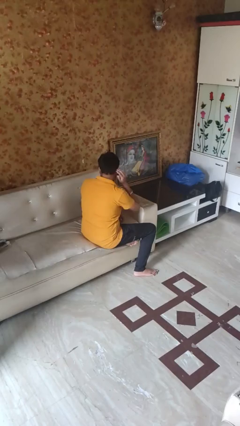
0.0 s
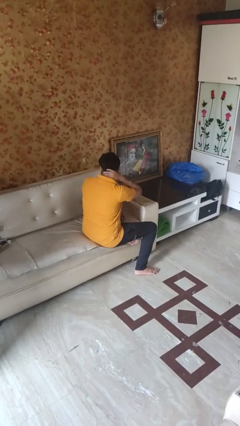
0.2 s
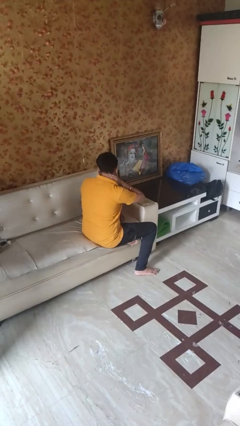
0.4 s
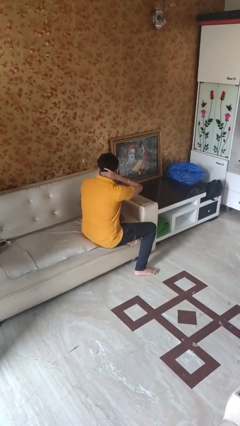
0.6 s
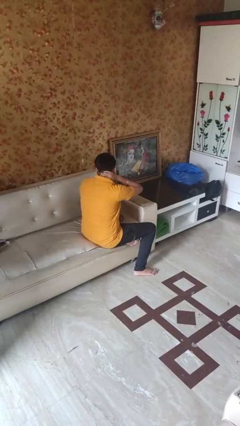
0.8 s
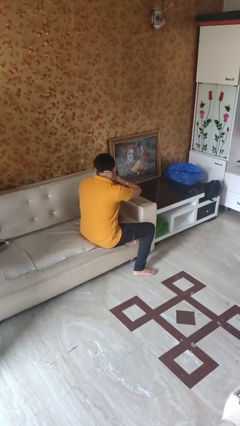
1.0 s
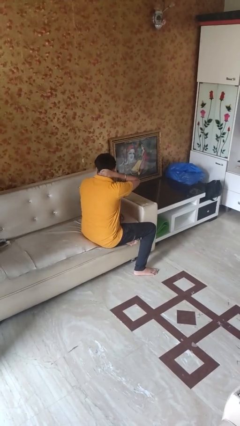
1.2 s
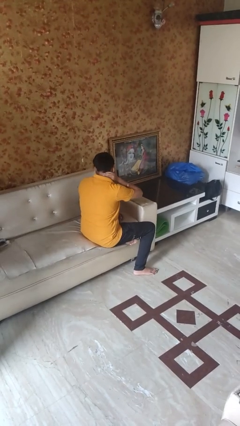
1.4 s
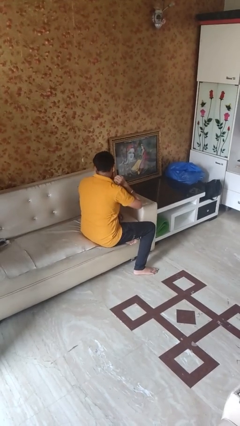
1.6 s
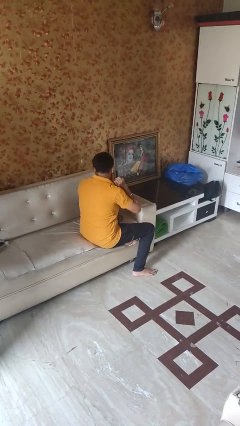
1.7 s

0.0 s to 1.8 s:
person rubs neck

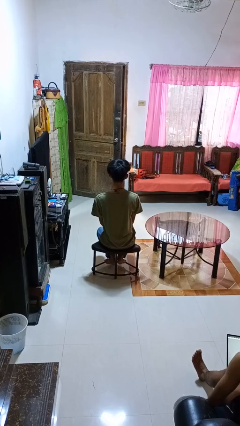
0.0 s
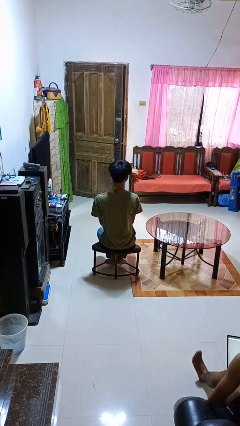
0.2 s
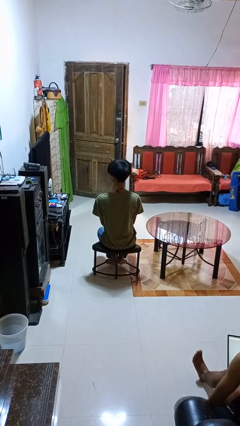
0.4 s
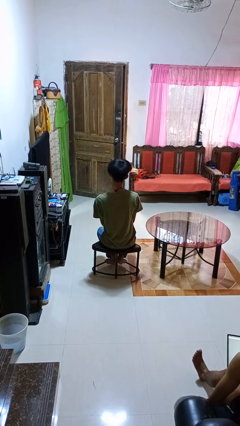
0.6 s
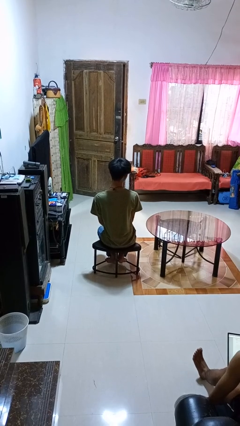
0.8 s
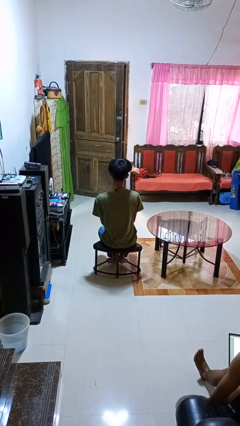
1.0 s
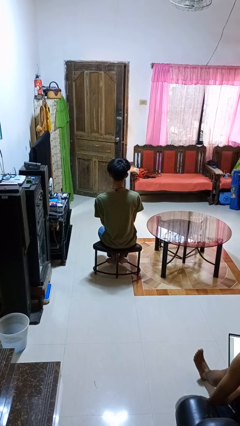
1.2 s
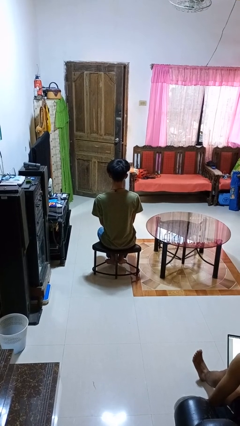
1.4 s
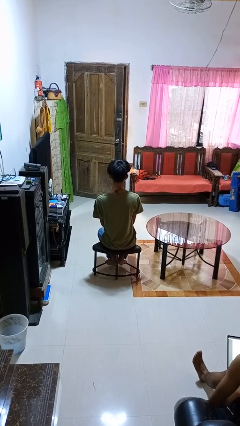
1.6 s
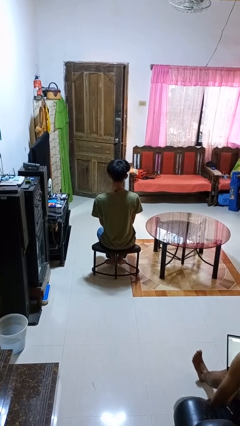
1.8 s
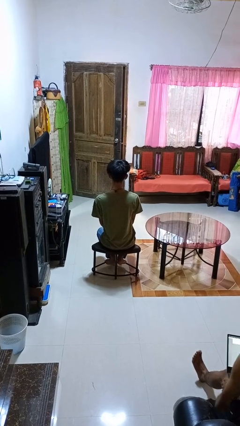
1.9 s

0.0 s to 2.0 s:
person shakes head

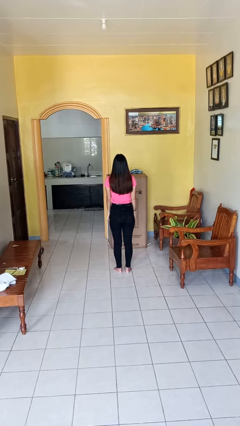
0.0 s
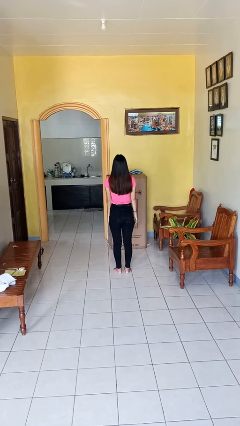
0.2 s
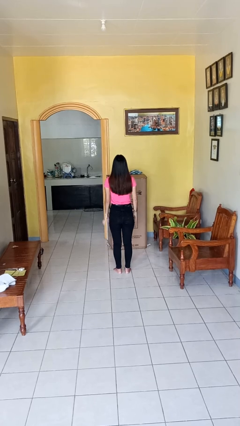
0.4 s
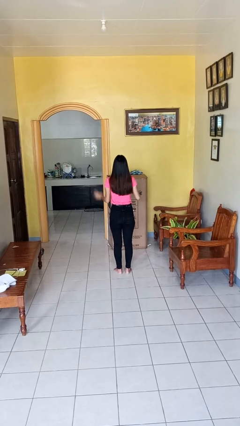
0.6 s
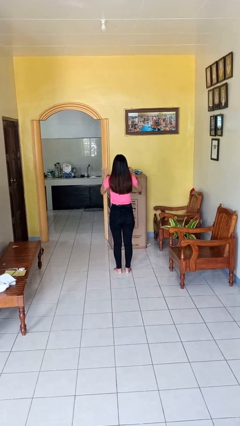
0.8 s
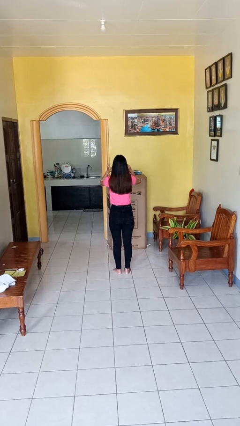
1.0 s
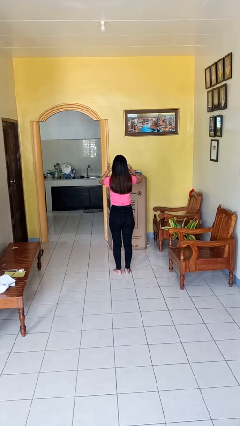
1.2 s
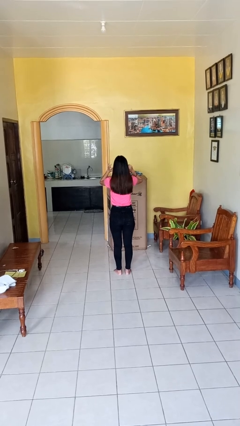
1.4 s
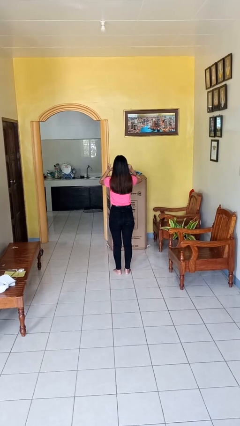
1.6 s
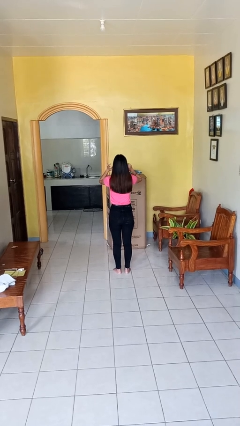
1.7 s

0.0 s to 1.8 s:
person puts fingers in ear

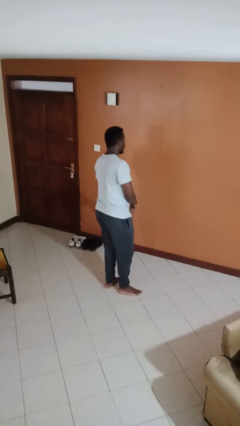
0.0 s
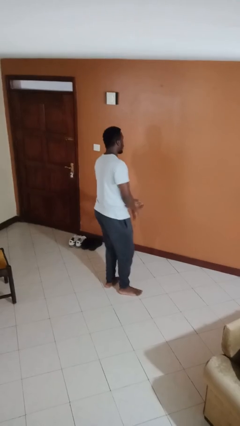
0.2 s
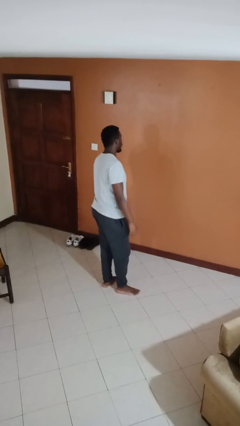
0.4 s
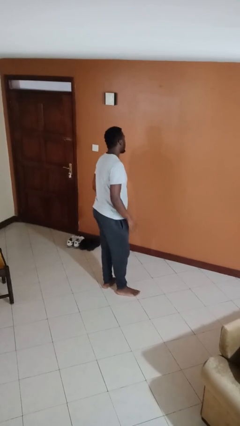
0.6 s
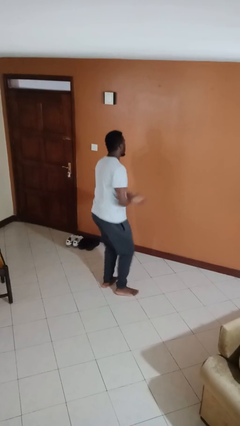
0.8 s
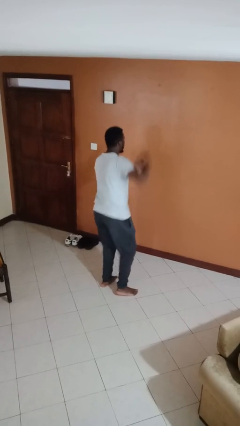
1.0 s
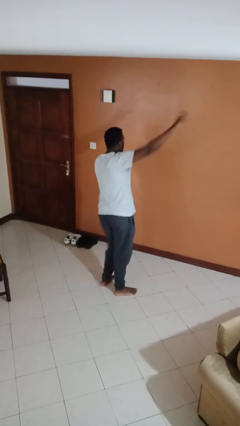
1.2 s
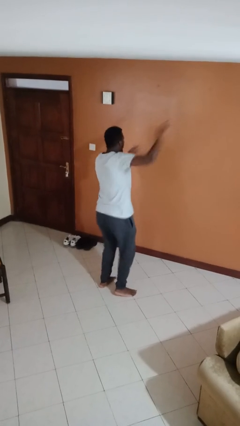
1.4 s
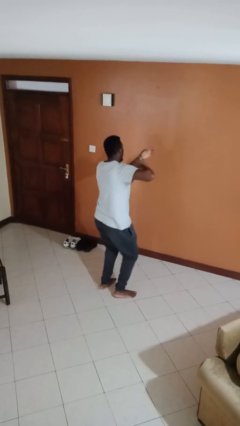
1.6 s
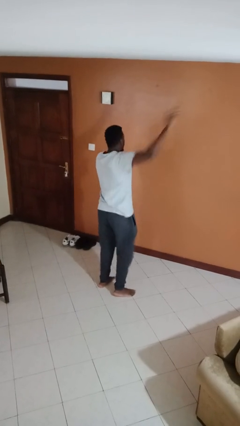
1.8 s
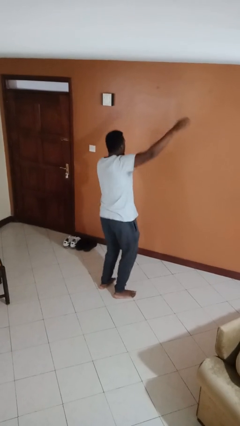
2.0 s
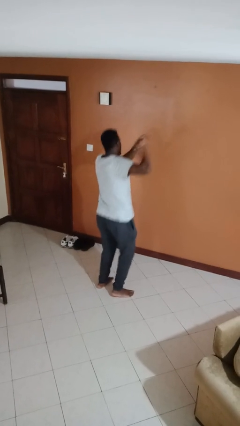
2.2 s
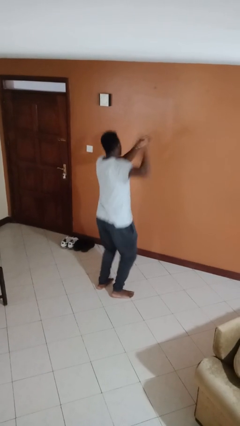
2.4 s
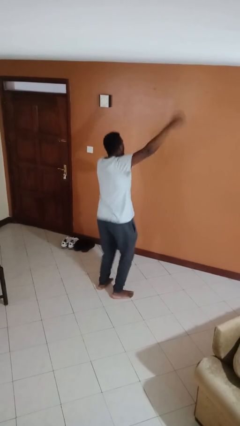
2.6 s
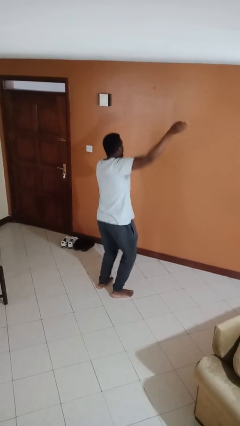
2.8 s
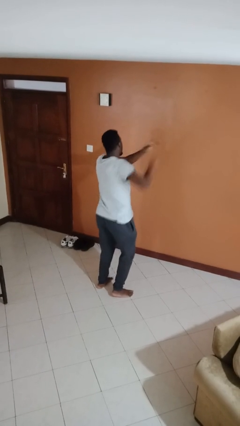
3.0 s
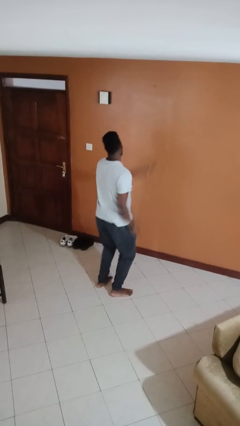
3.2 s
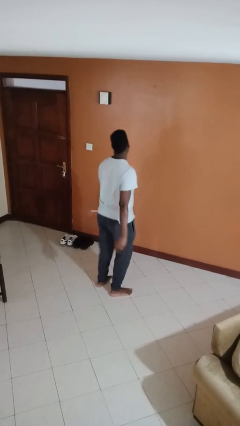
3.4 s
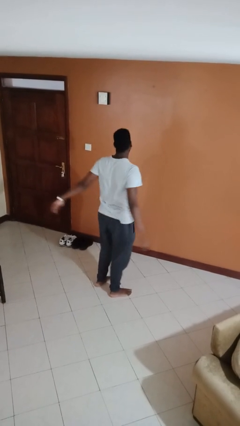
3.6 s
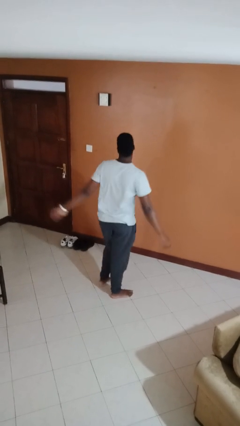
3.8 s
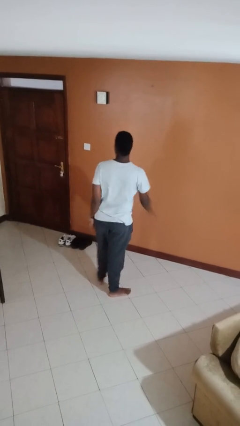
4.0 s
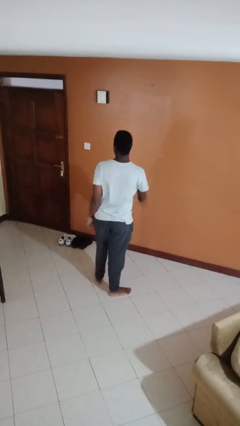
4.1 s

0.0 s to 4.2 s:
person dances in place

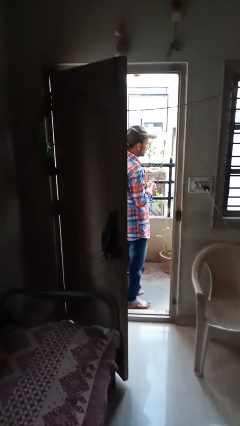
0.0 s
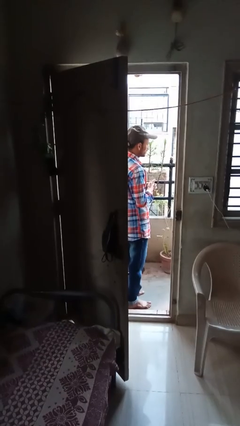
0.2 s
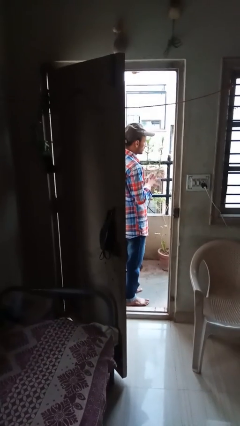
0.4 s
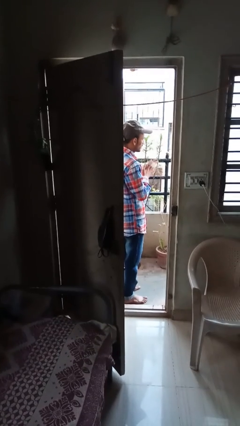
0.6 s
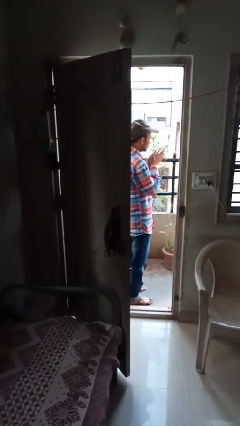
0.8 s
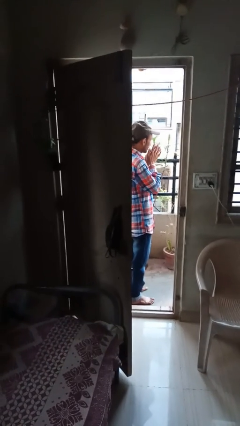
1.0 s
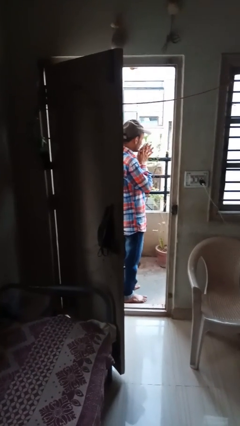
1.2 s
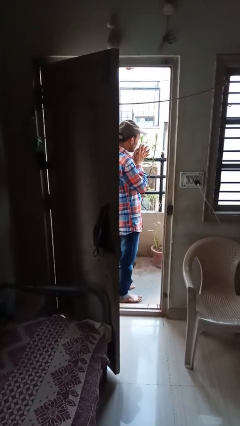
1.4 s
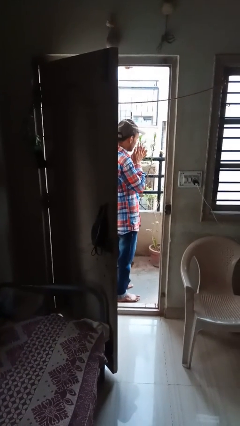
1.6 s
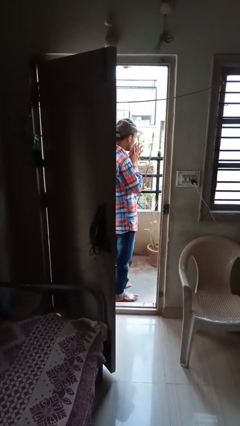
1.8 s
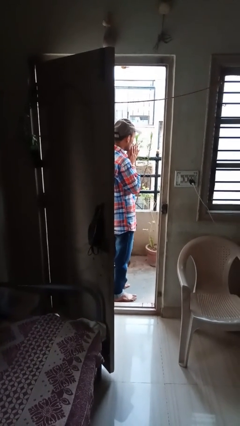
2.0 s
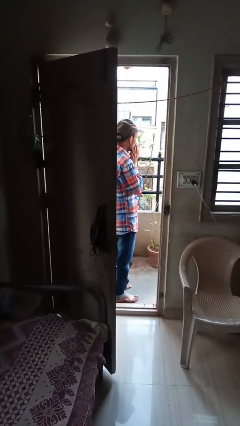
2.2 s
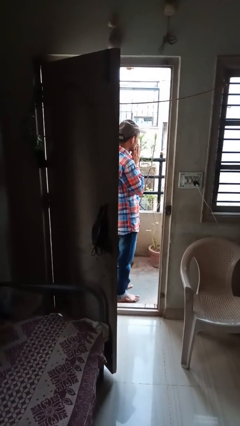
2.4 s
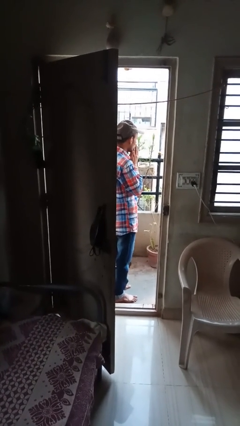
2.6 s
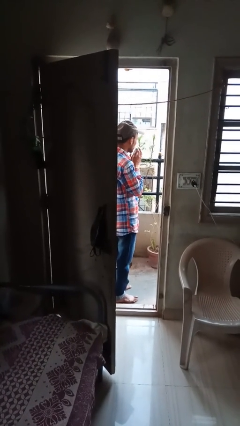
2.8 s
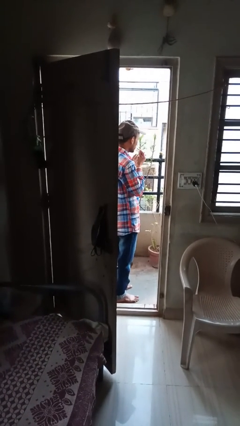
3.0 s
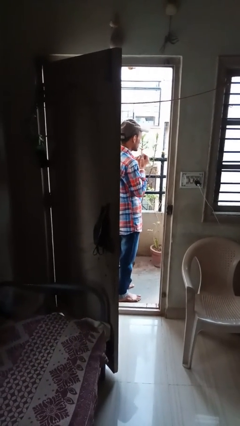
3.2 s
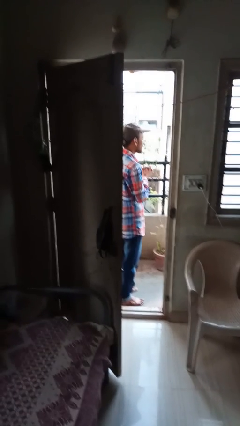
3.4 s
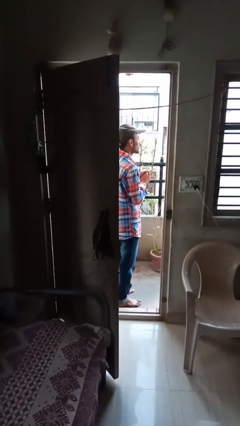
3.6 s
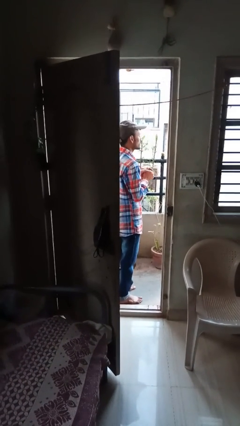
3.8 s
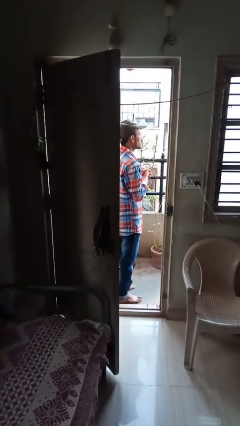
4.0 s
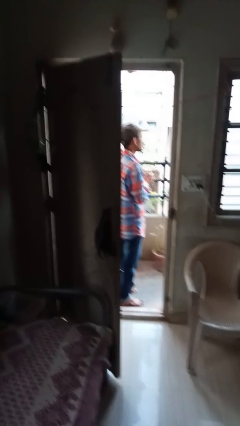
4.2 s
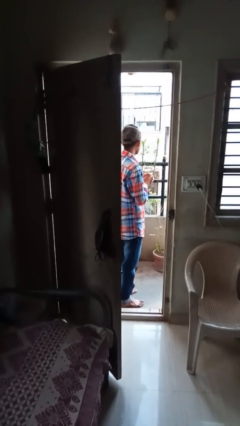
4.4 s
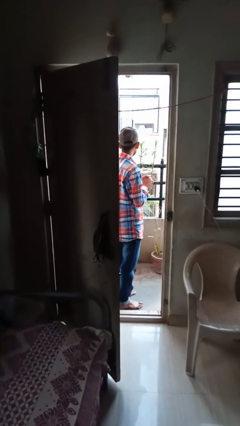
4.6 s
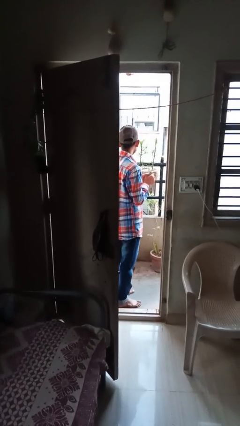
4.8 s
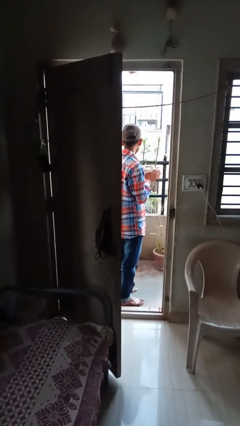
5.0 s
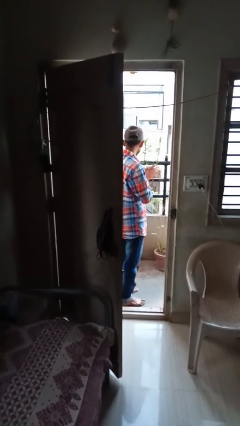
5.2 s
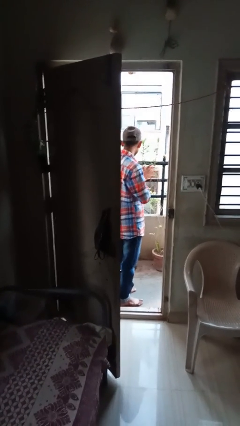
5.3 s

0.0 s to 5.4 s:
person blows into hands

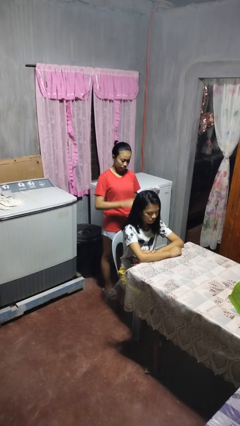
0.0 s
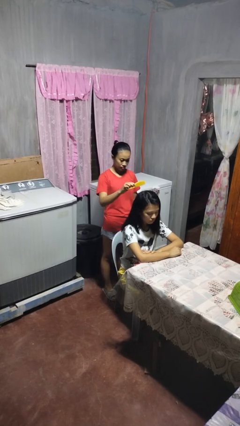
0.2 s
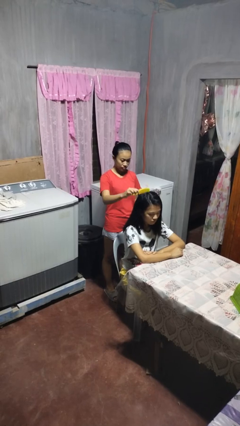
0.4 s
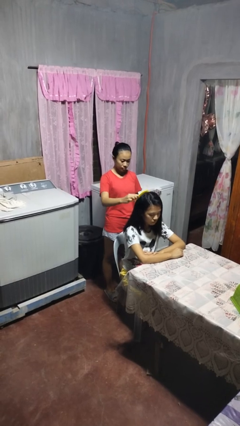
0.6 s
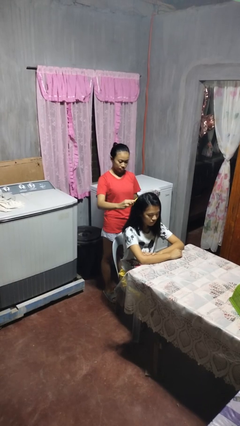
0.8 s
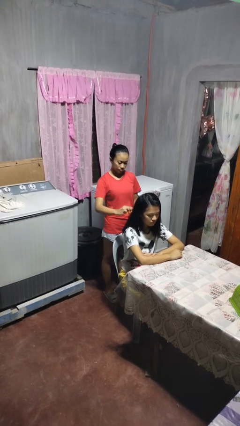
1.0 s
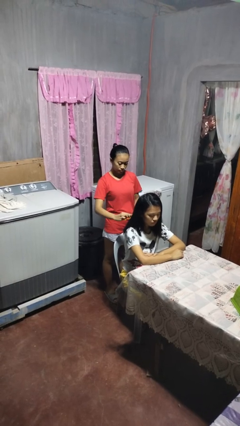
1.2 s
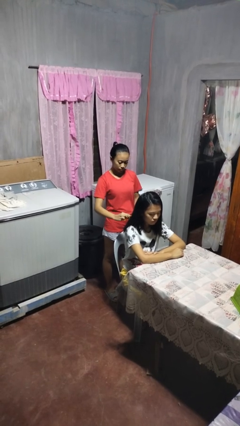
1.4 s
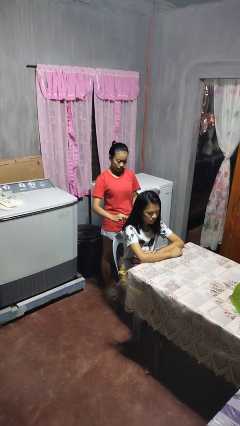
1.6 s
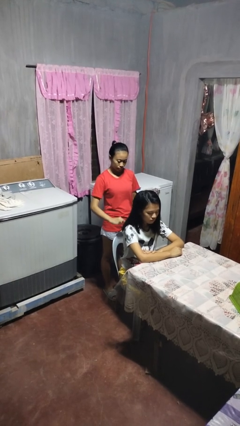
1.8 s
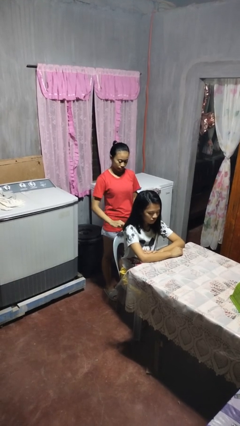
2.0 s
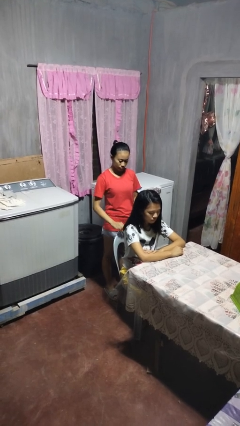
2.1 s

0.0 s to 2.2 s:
person brushes hair of person
